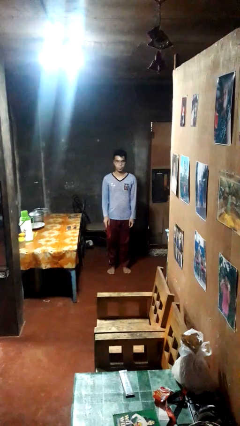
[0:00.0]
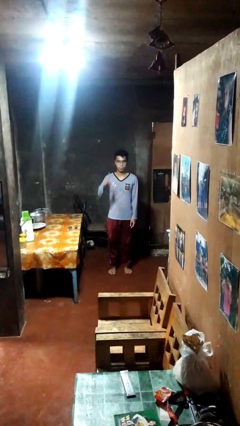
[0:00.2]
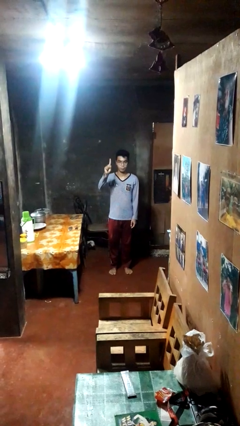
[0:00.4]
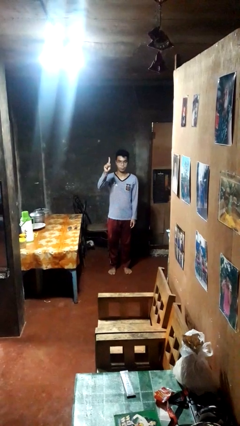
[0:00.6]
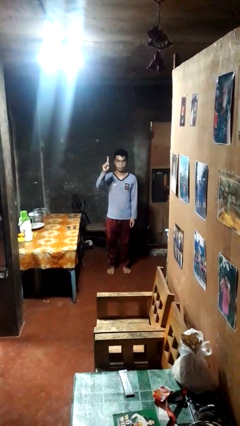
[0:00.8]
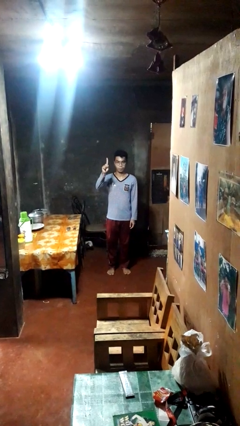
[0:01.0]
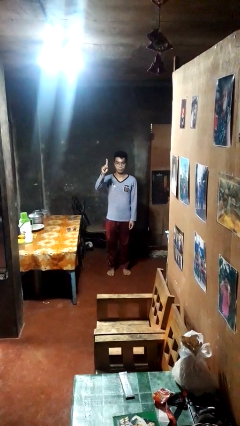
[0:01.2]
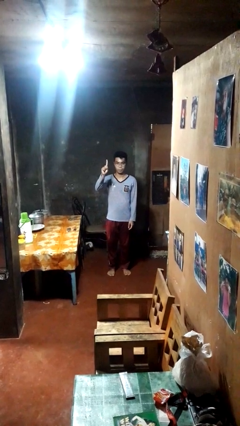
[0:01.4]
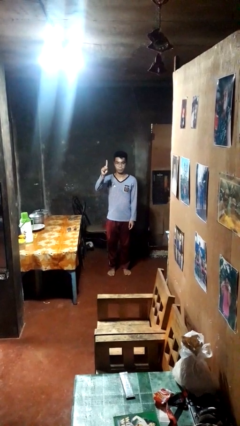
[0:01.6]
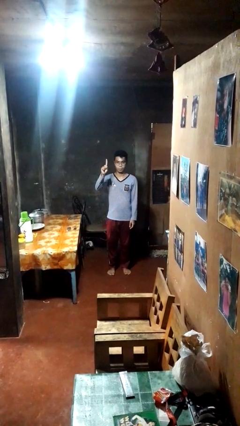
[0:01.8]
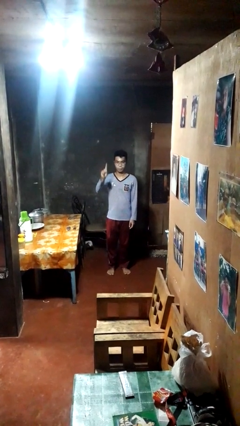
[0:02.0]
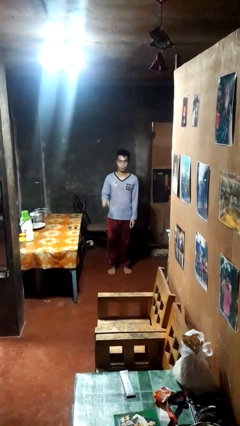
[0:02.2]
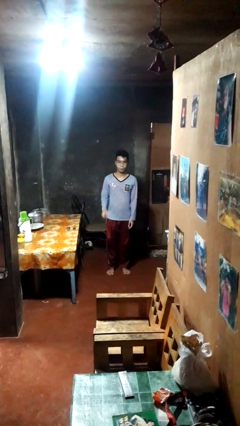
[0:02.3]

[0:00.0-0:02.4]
person gestures number one

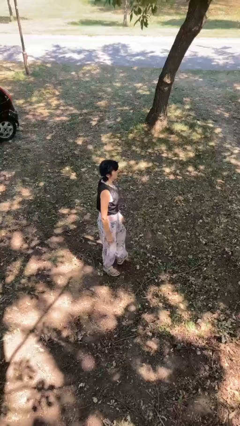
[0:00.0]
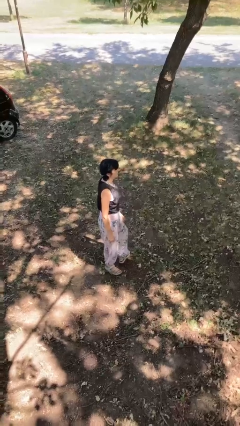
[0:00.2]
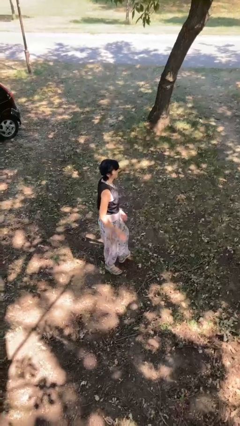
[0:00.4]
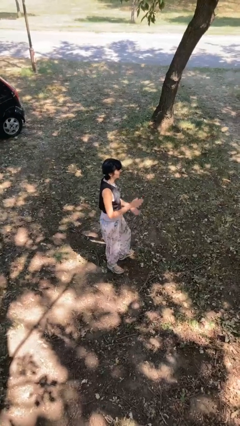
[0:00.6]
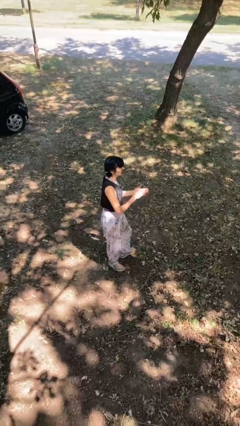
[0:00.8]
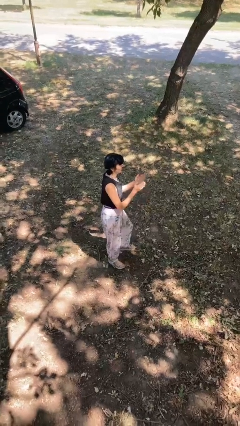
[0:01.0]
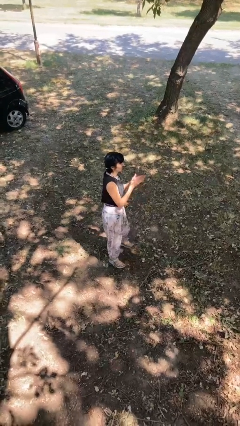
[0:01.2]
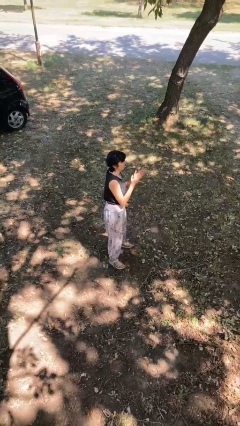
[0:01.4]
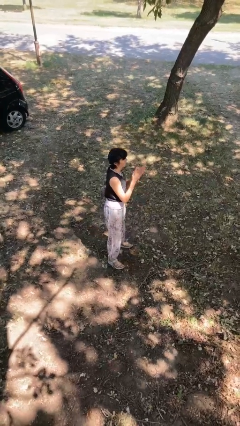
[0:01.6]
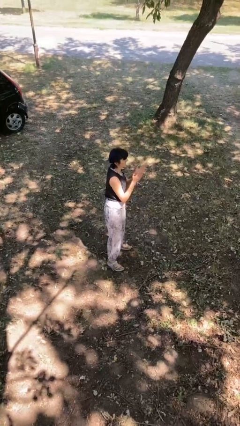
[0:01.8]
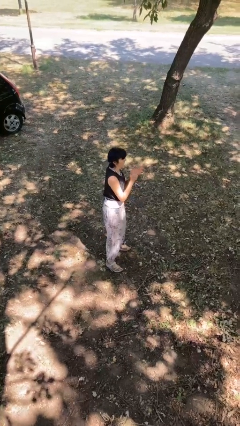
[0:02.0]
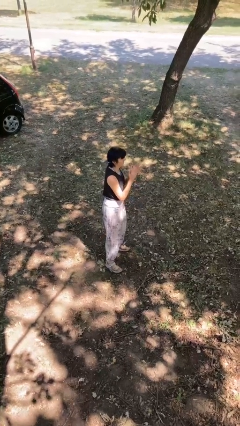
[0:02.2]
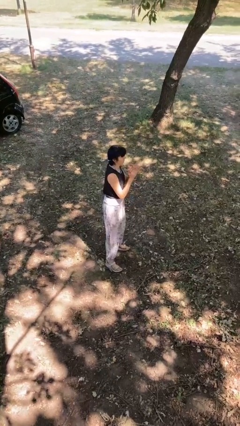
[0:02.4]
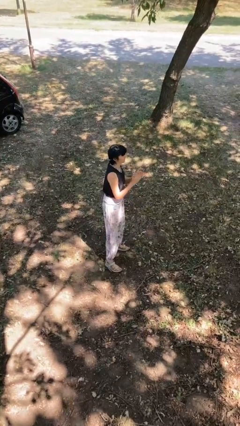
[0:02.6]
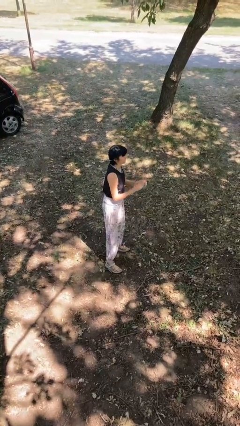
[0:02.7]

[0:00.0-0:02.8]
person claps hands

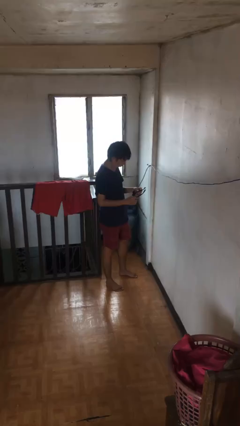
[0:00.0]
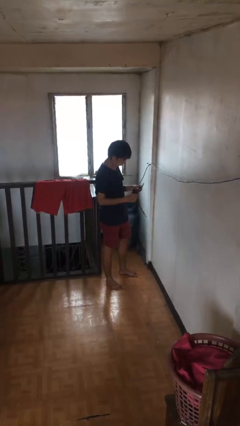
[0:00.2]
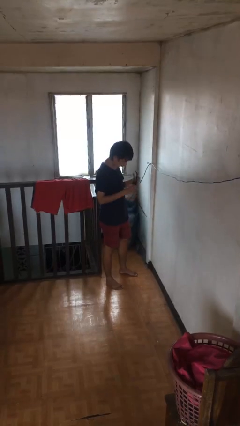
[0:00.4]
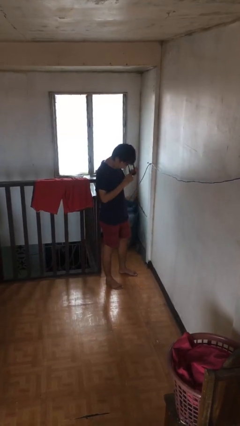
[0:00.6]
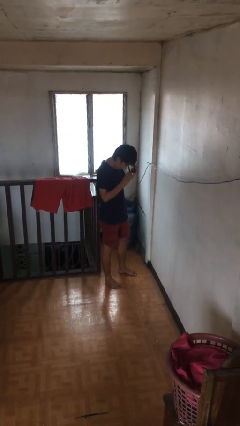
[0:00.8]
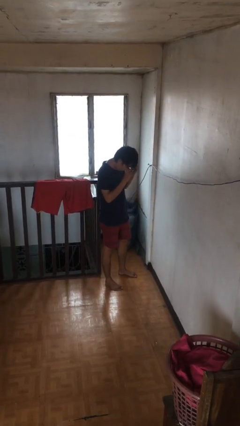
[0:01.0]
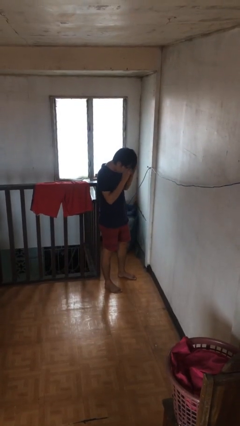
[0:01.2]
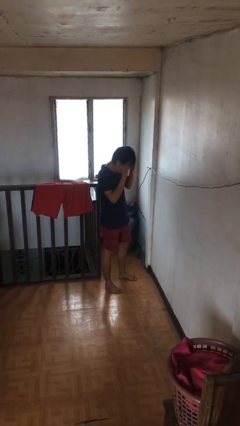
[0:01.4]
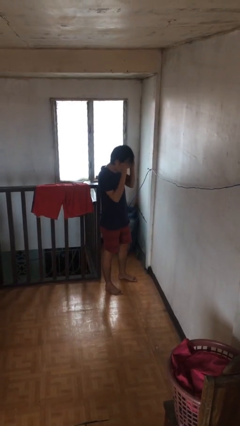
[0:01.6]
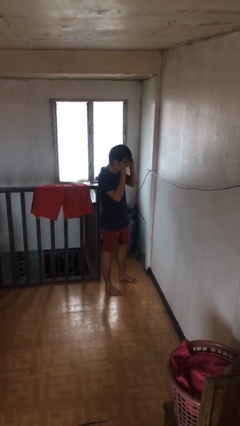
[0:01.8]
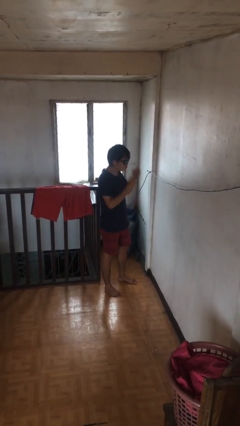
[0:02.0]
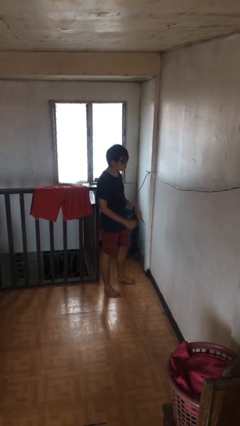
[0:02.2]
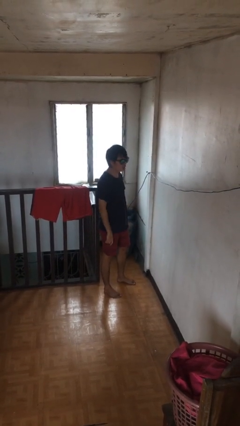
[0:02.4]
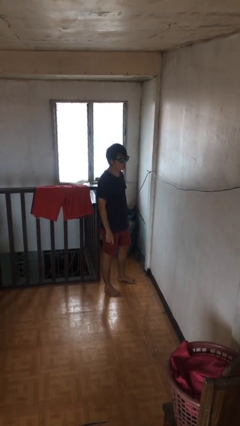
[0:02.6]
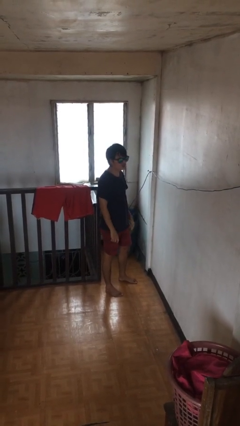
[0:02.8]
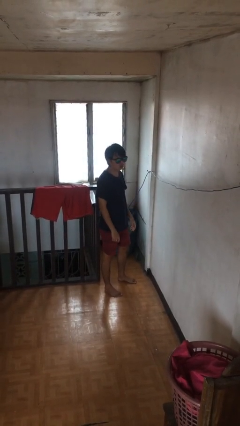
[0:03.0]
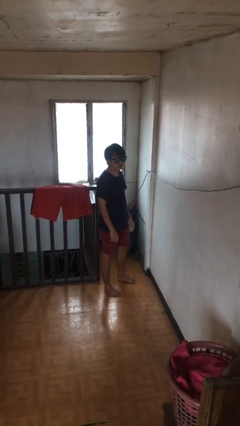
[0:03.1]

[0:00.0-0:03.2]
person puts on sunglasses

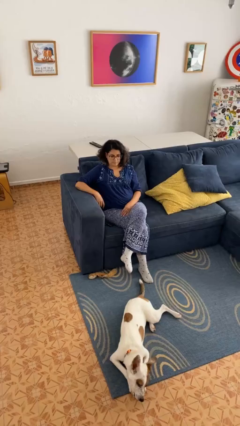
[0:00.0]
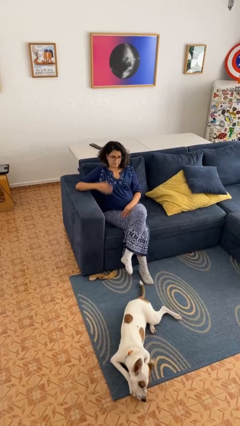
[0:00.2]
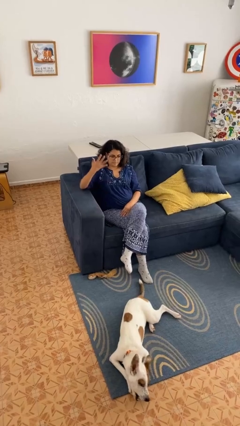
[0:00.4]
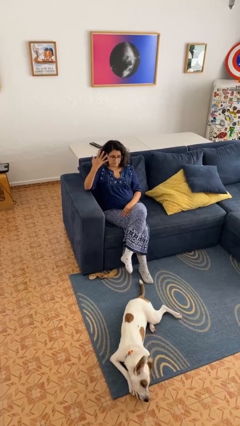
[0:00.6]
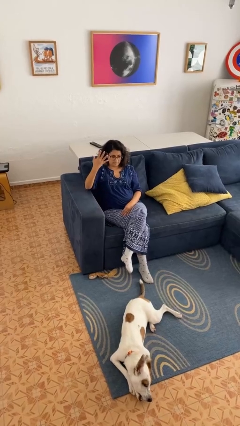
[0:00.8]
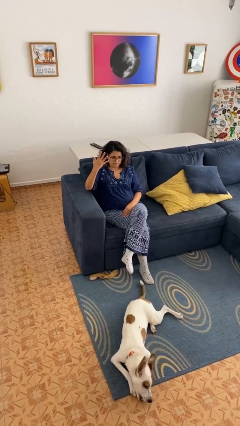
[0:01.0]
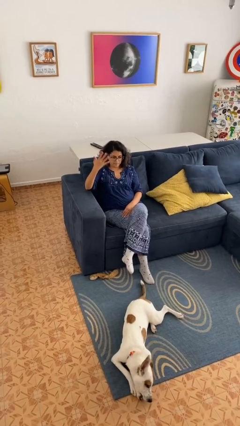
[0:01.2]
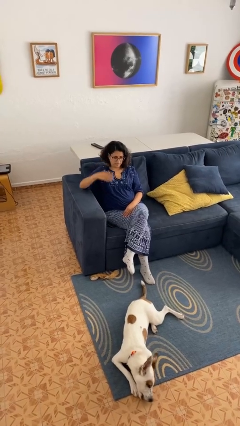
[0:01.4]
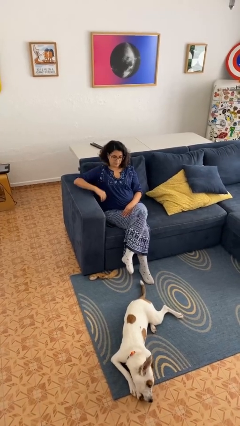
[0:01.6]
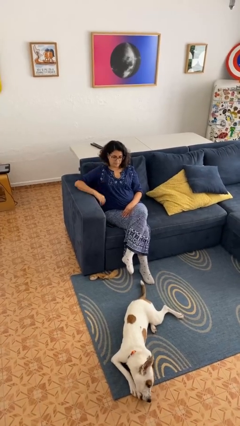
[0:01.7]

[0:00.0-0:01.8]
person gestures number five

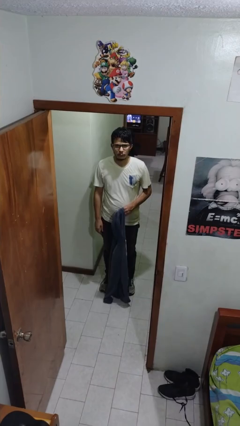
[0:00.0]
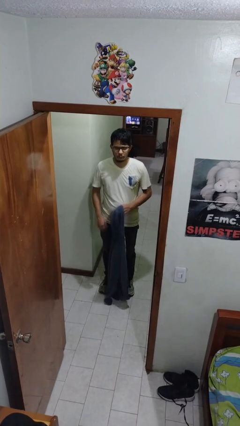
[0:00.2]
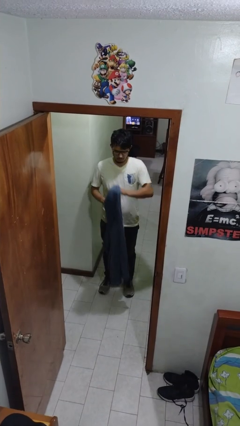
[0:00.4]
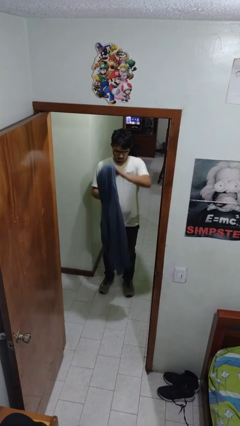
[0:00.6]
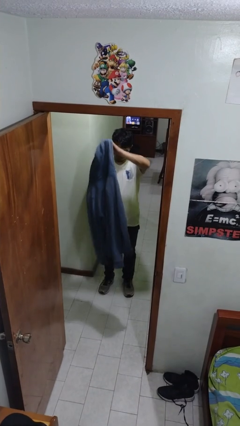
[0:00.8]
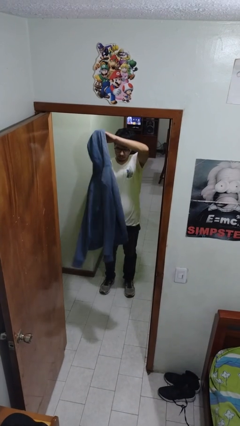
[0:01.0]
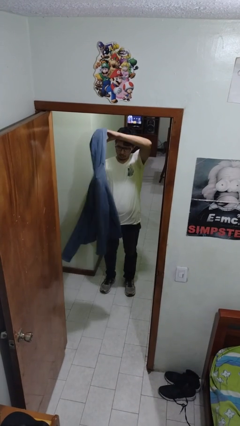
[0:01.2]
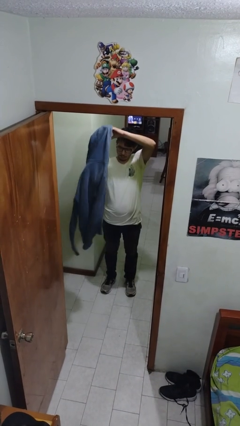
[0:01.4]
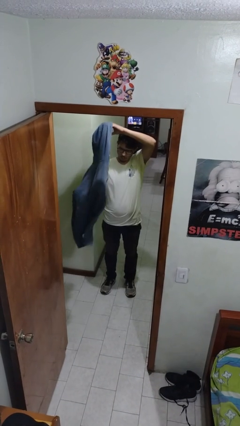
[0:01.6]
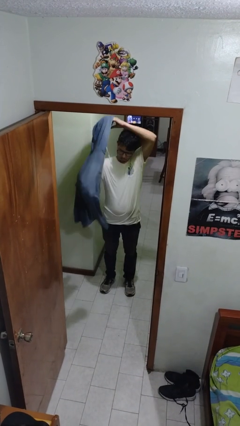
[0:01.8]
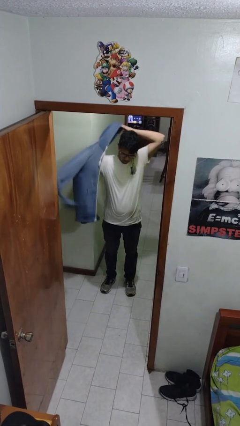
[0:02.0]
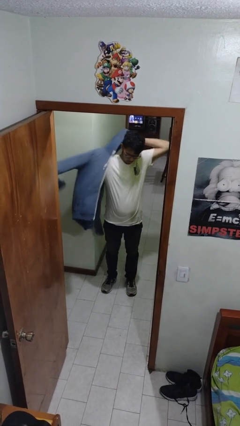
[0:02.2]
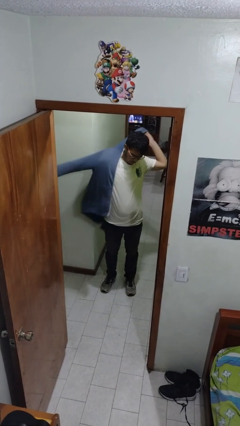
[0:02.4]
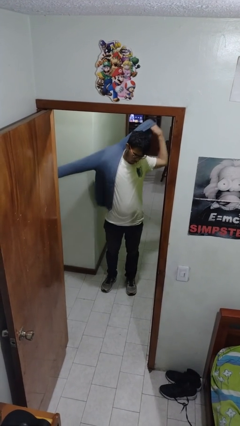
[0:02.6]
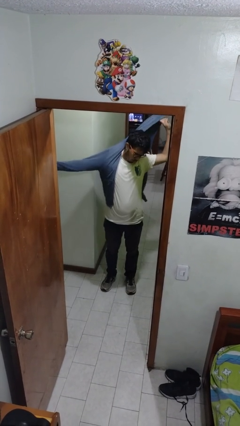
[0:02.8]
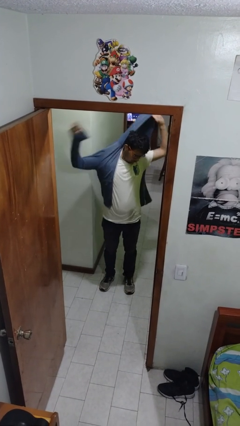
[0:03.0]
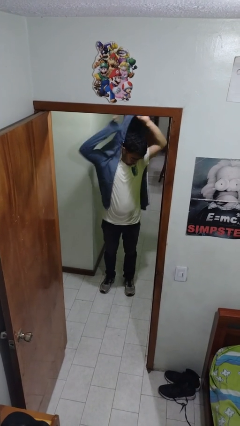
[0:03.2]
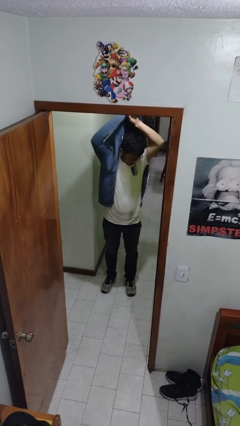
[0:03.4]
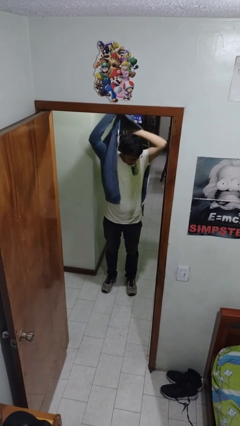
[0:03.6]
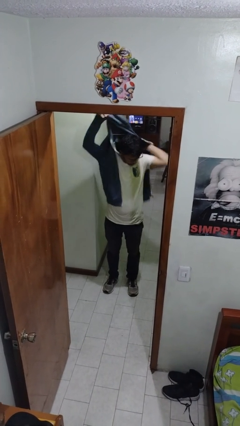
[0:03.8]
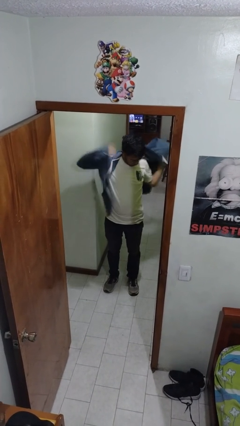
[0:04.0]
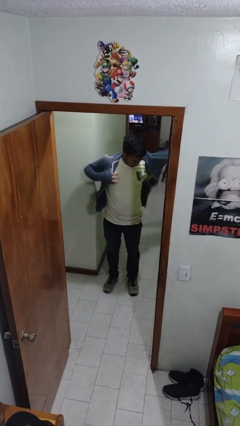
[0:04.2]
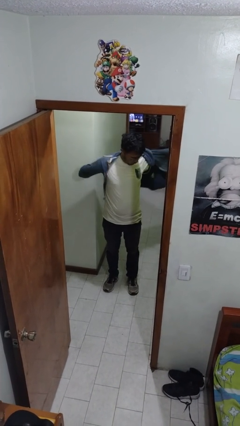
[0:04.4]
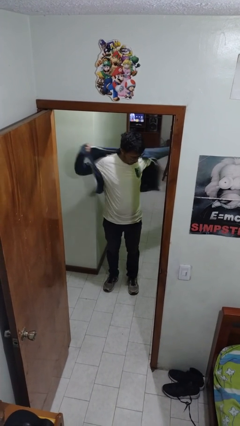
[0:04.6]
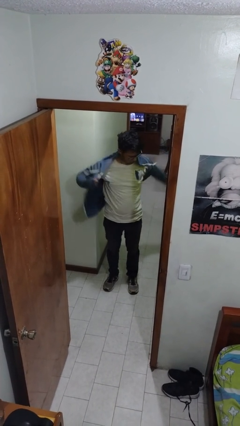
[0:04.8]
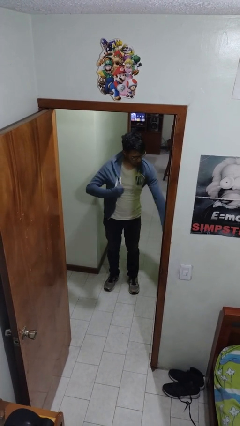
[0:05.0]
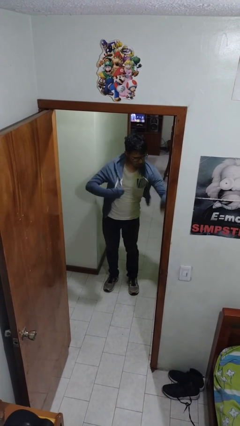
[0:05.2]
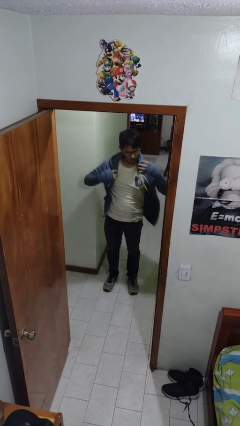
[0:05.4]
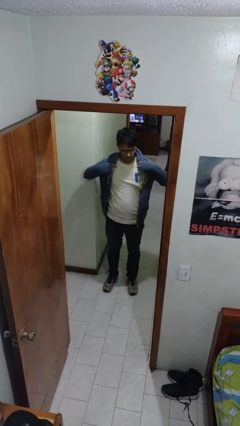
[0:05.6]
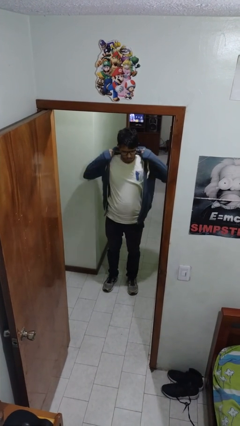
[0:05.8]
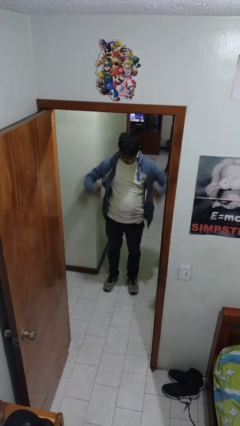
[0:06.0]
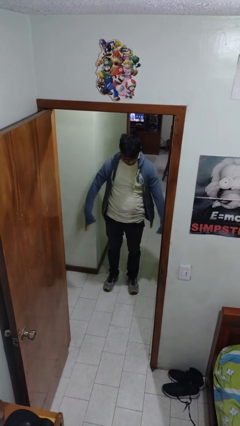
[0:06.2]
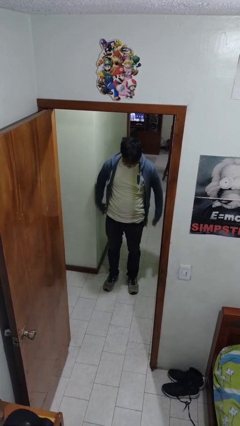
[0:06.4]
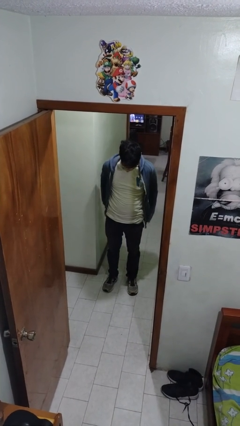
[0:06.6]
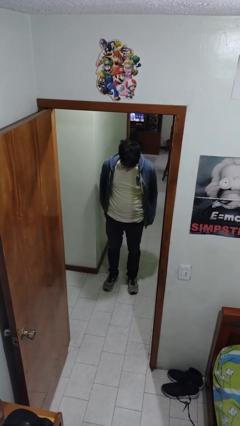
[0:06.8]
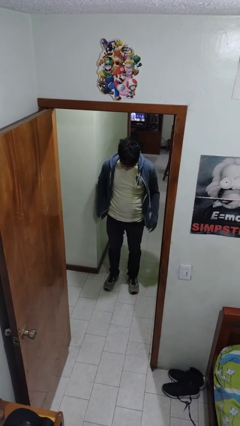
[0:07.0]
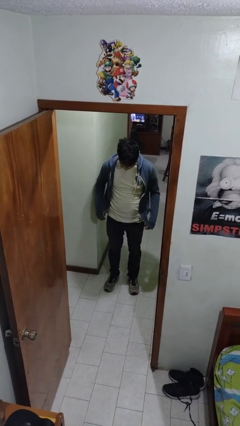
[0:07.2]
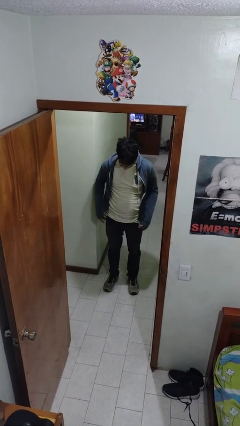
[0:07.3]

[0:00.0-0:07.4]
person puts on jacket
